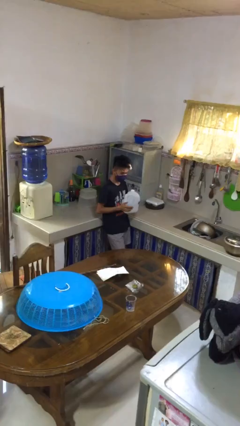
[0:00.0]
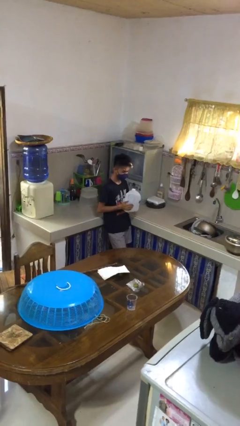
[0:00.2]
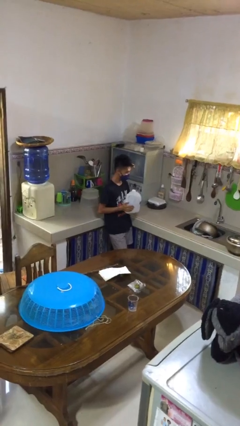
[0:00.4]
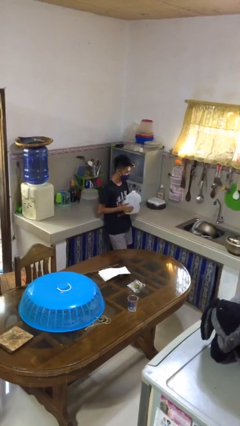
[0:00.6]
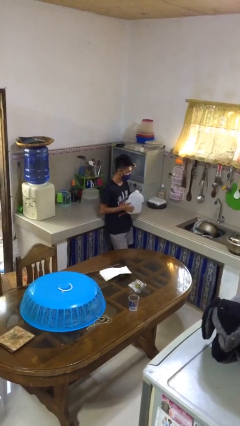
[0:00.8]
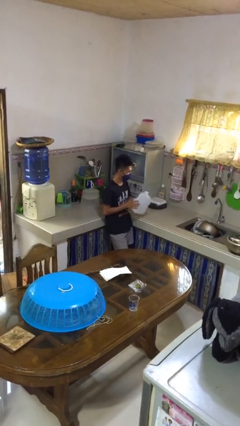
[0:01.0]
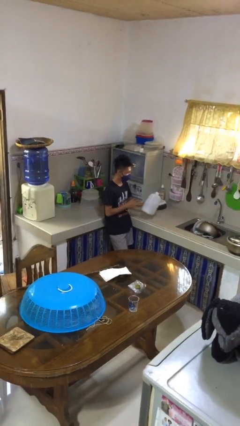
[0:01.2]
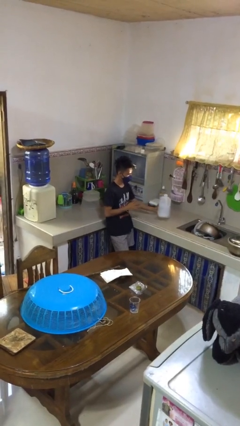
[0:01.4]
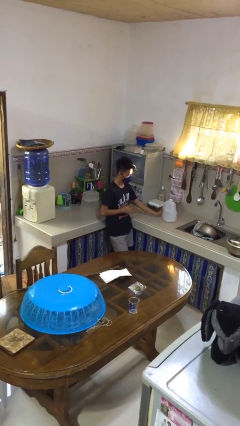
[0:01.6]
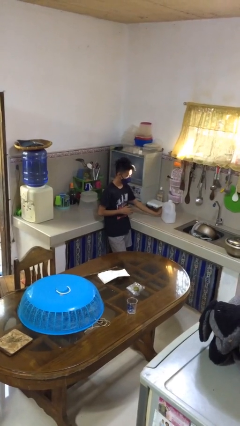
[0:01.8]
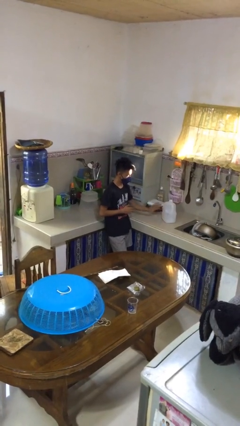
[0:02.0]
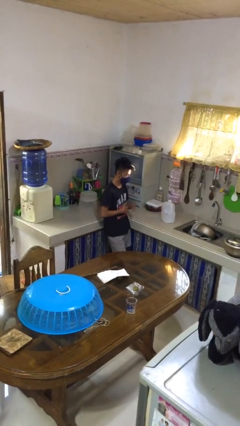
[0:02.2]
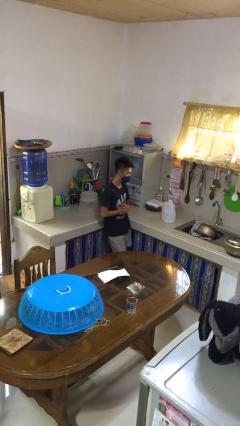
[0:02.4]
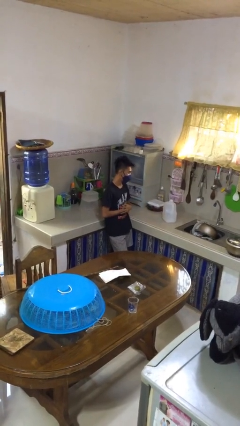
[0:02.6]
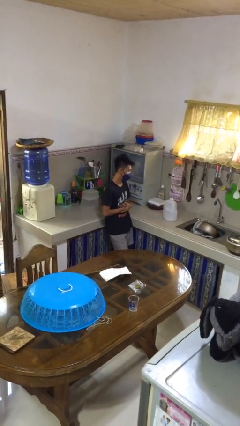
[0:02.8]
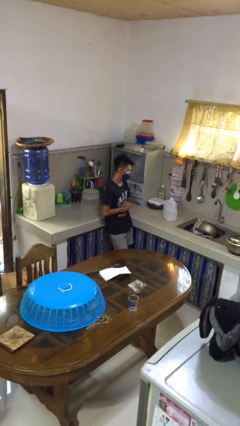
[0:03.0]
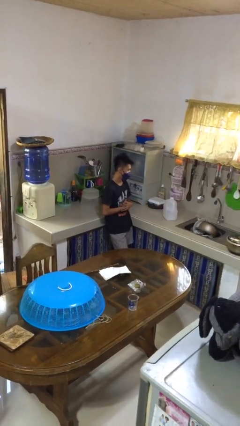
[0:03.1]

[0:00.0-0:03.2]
person picks up object from countertop

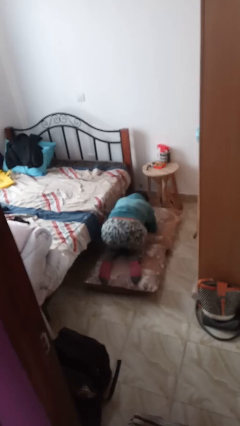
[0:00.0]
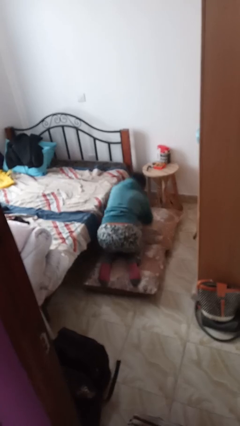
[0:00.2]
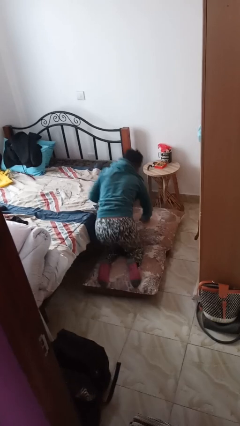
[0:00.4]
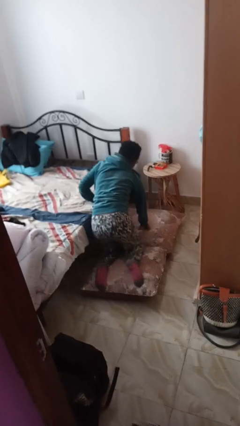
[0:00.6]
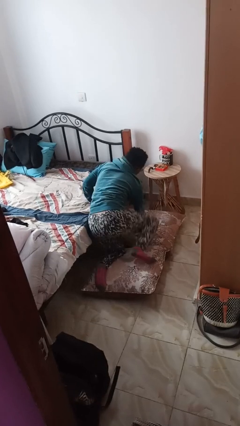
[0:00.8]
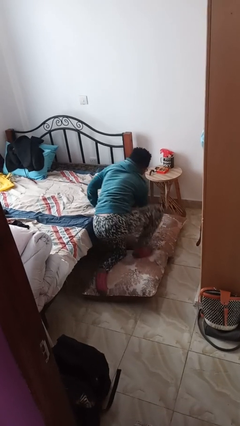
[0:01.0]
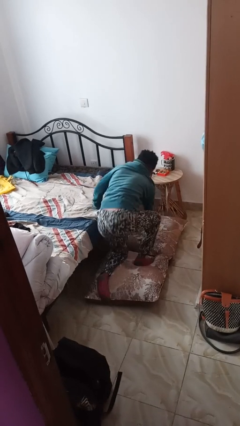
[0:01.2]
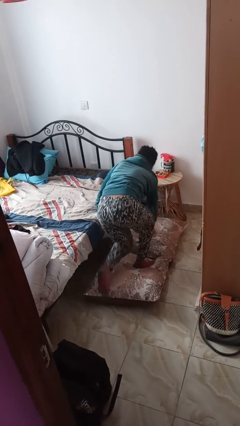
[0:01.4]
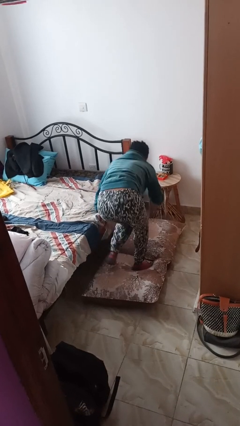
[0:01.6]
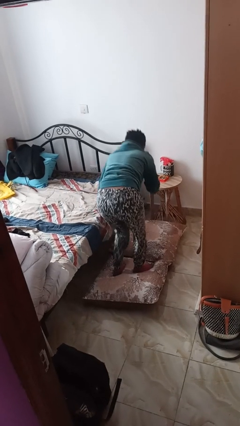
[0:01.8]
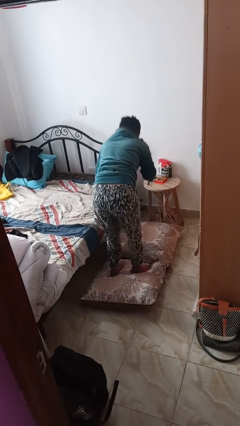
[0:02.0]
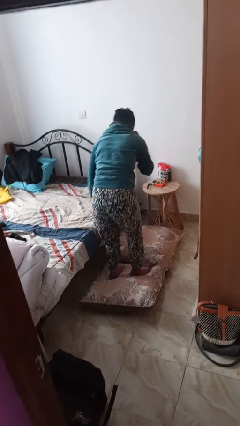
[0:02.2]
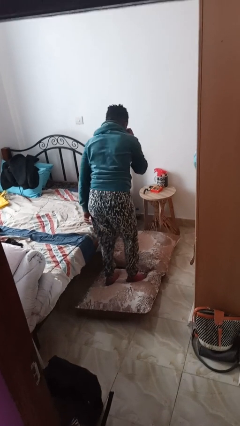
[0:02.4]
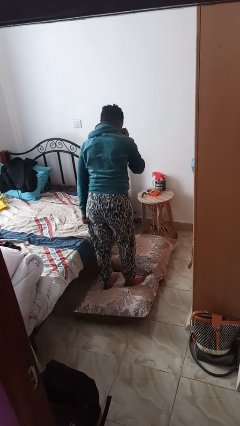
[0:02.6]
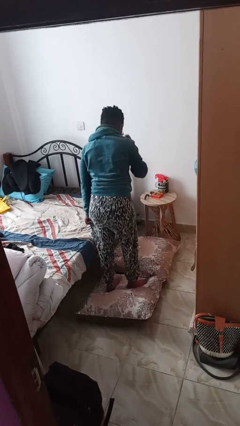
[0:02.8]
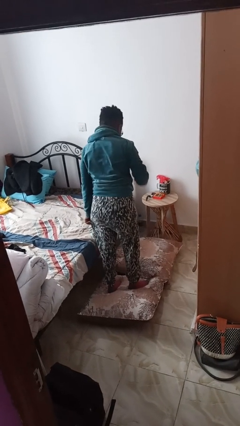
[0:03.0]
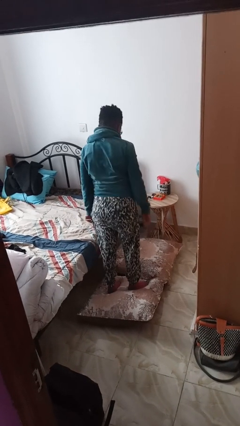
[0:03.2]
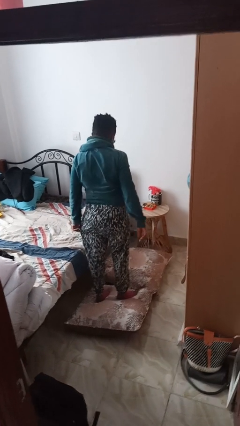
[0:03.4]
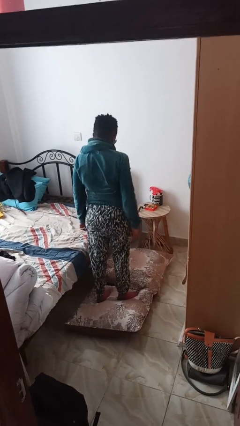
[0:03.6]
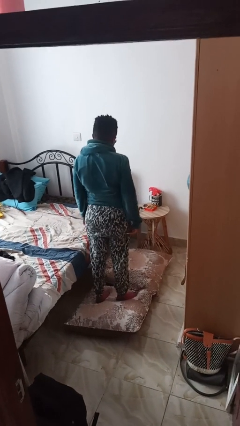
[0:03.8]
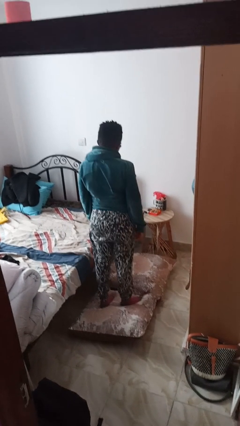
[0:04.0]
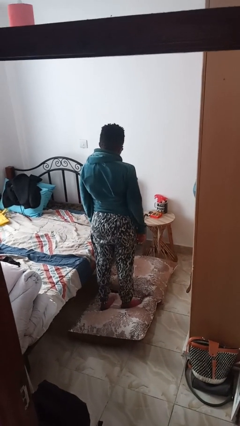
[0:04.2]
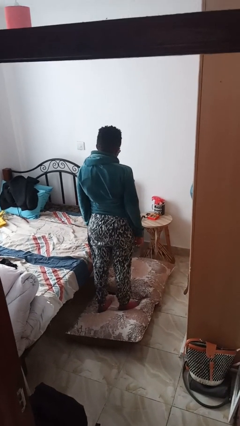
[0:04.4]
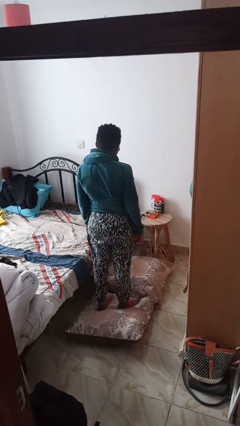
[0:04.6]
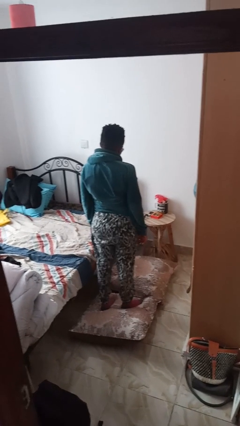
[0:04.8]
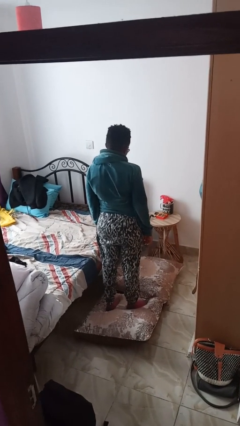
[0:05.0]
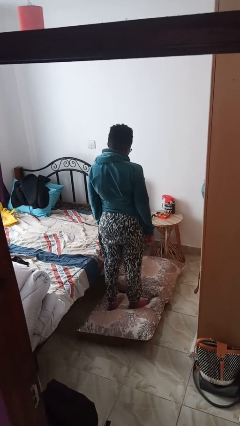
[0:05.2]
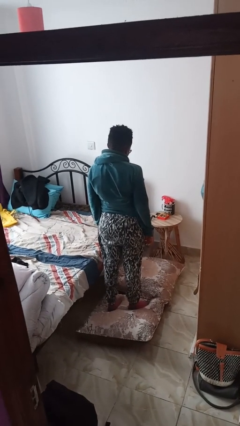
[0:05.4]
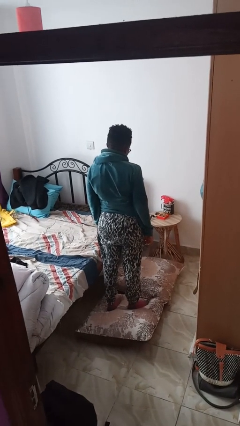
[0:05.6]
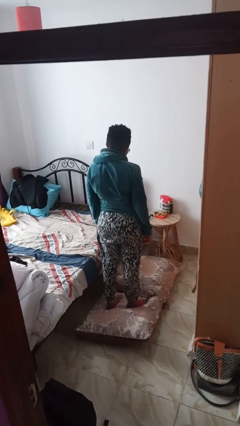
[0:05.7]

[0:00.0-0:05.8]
person stands up from floor

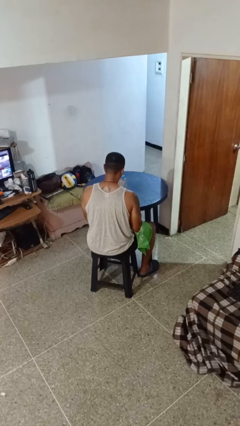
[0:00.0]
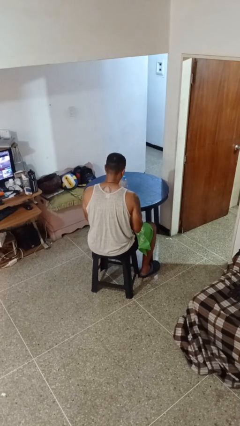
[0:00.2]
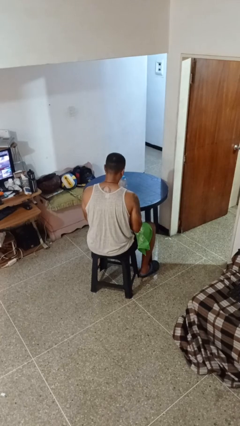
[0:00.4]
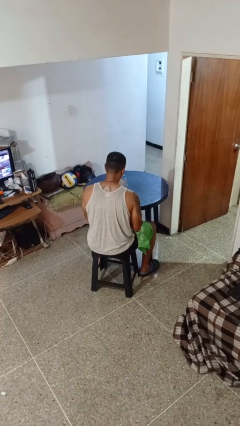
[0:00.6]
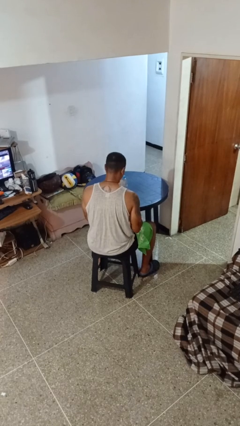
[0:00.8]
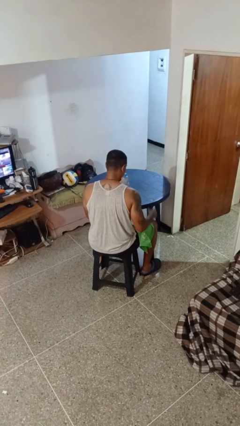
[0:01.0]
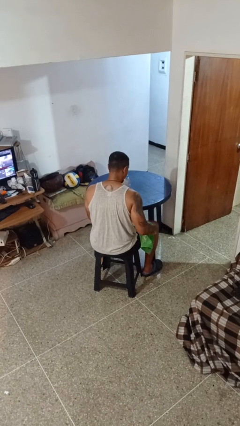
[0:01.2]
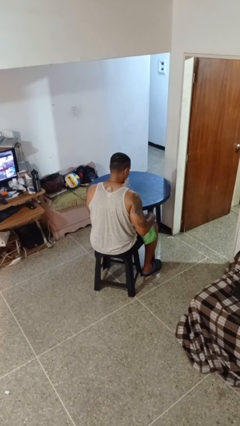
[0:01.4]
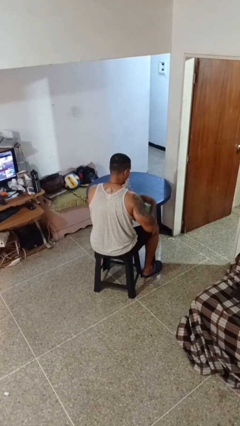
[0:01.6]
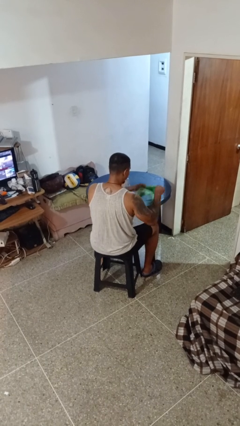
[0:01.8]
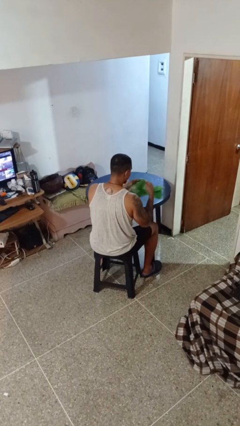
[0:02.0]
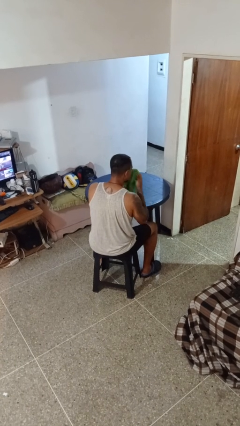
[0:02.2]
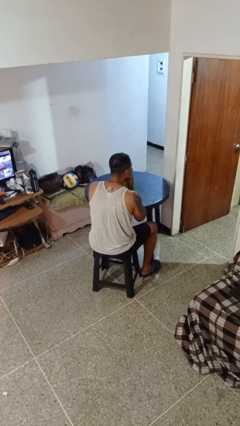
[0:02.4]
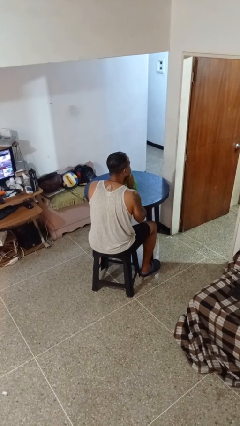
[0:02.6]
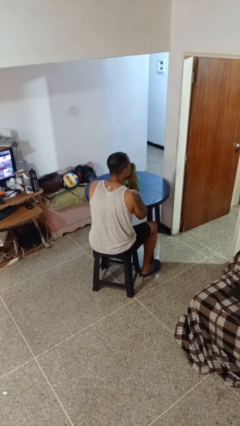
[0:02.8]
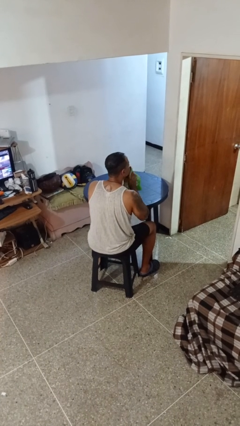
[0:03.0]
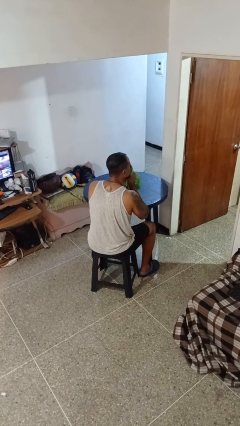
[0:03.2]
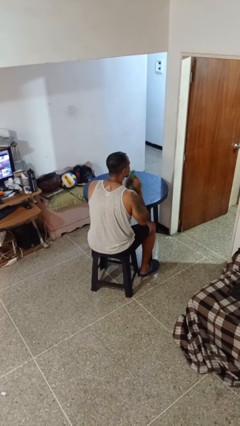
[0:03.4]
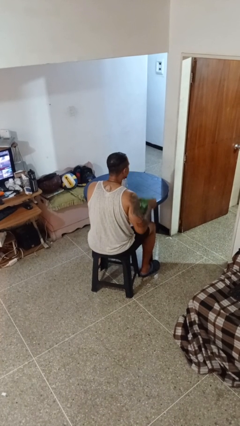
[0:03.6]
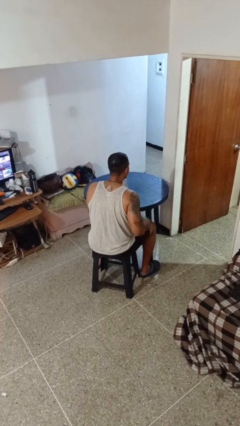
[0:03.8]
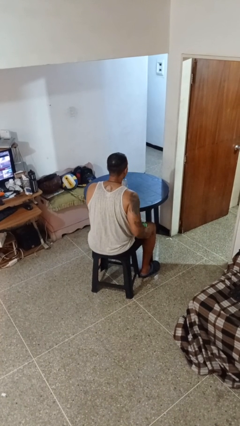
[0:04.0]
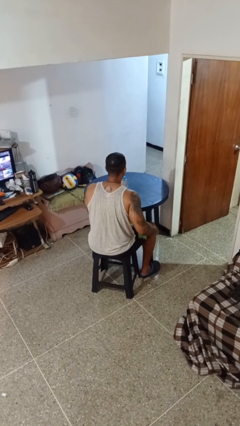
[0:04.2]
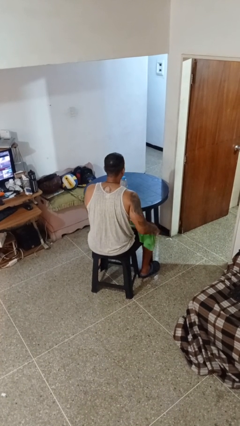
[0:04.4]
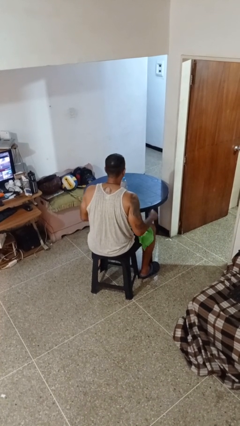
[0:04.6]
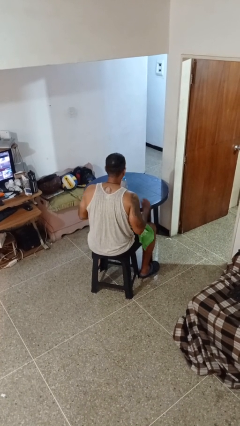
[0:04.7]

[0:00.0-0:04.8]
person wipes mouth with napkin

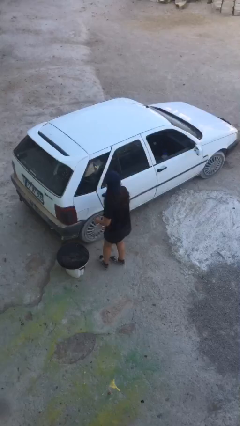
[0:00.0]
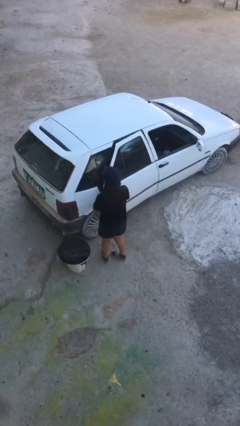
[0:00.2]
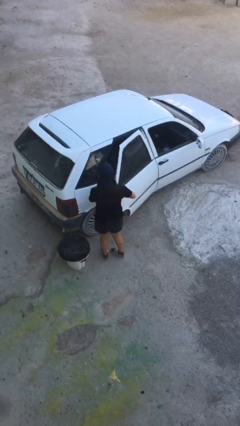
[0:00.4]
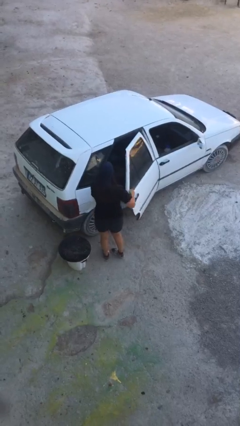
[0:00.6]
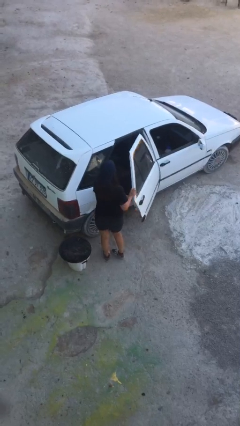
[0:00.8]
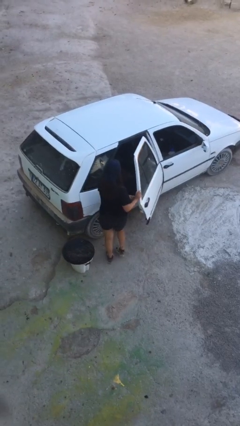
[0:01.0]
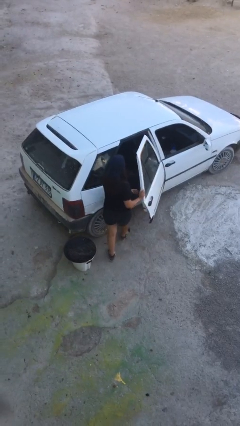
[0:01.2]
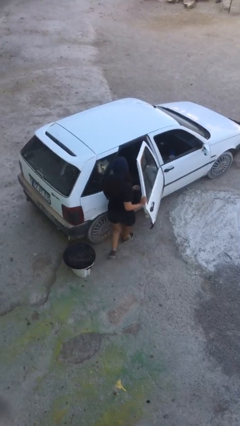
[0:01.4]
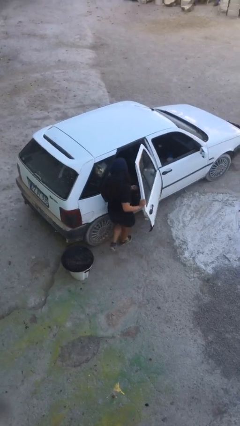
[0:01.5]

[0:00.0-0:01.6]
person opens car door

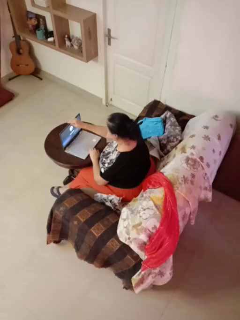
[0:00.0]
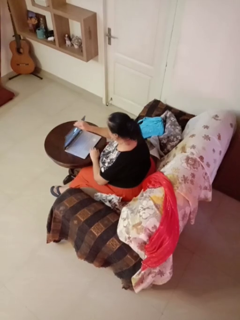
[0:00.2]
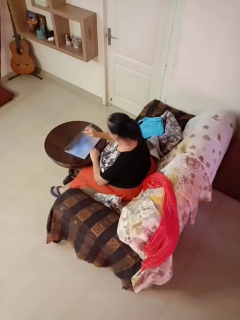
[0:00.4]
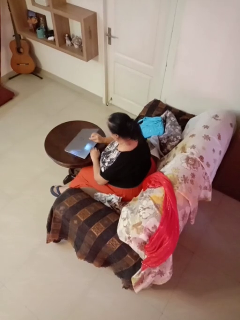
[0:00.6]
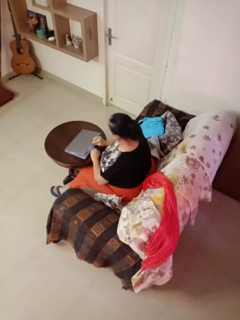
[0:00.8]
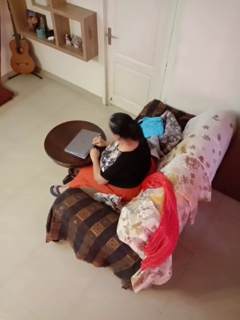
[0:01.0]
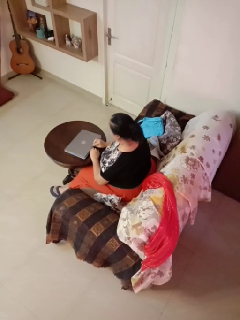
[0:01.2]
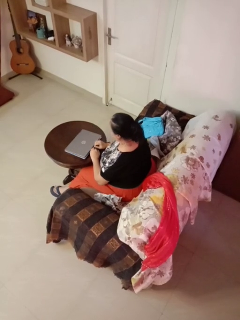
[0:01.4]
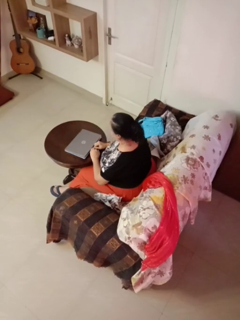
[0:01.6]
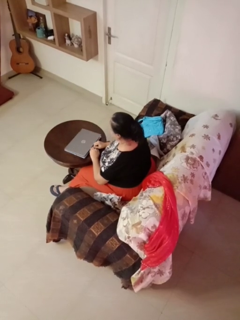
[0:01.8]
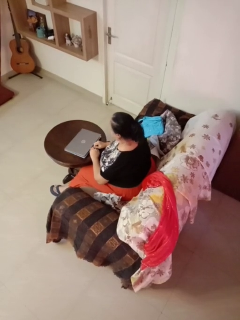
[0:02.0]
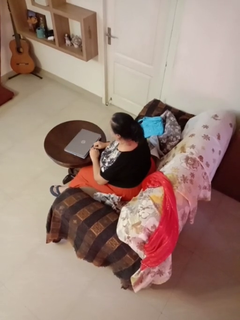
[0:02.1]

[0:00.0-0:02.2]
person closes laptop
